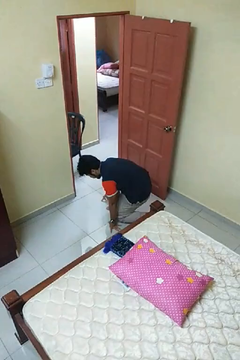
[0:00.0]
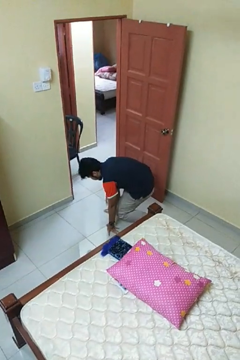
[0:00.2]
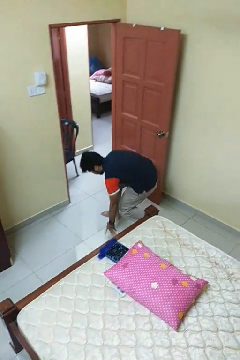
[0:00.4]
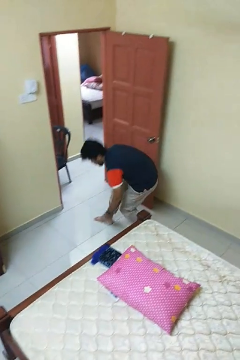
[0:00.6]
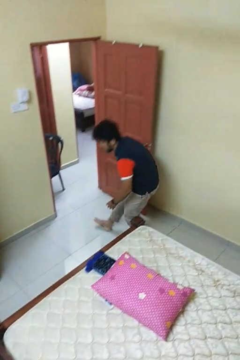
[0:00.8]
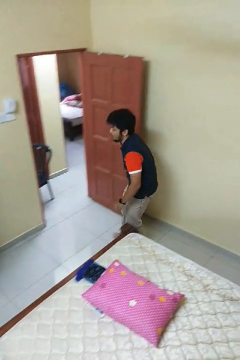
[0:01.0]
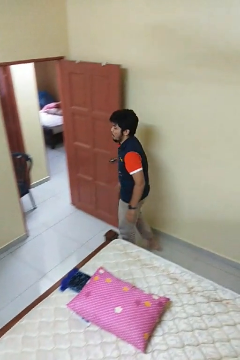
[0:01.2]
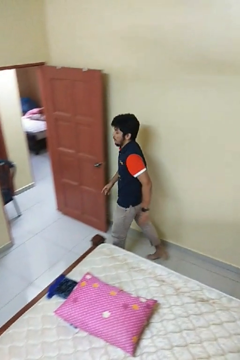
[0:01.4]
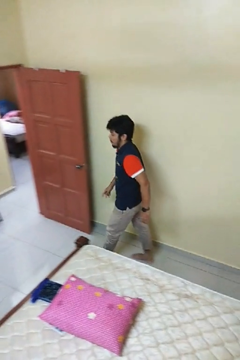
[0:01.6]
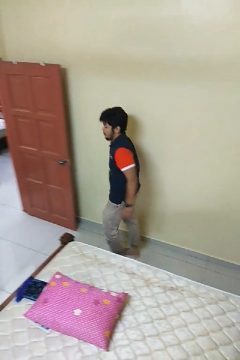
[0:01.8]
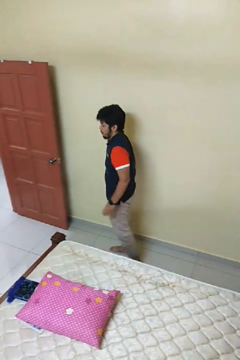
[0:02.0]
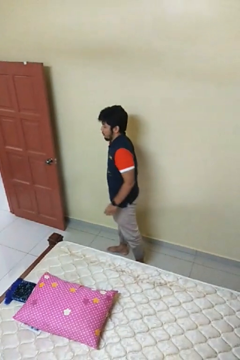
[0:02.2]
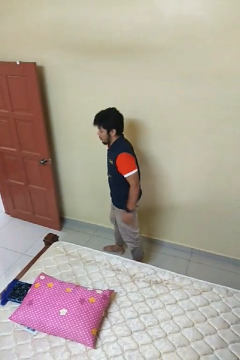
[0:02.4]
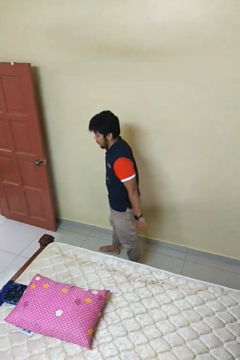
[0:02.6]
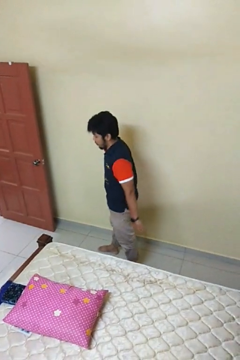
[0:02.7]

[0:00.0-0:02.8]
person stands up from floor

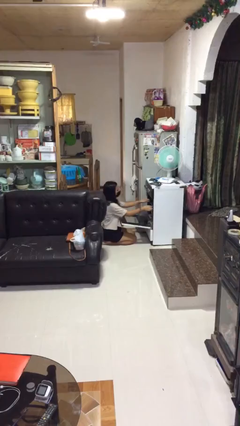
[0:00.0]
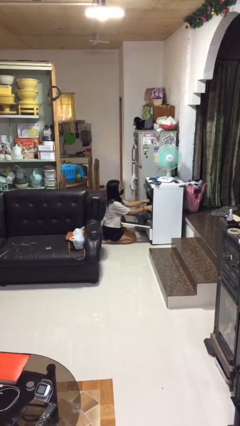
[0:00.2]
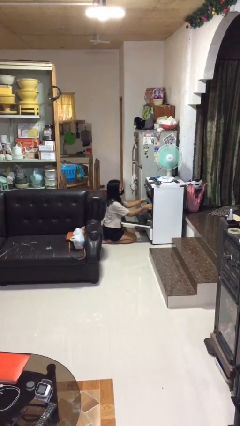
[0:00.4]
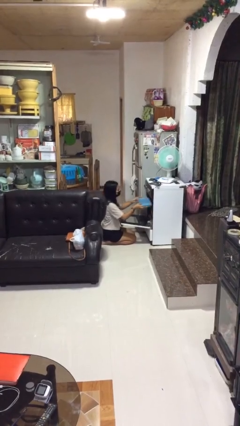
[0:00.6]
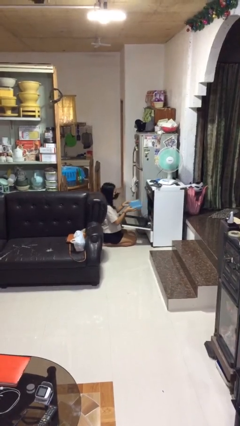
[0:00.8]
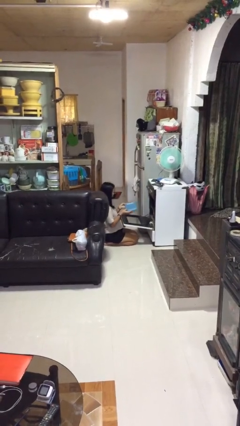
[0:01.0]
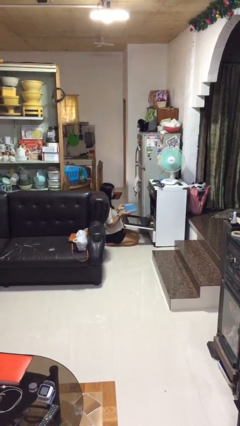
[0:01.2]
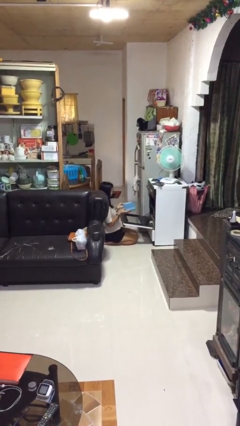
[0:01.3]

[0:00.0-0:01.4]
person takes object from oven

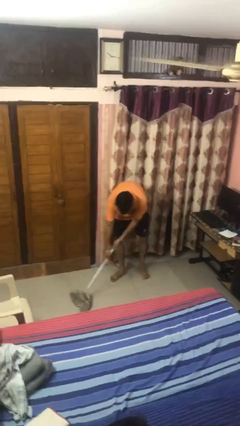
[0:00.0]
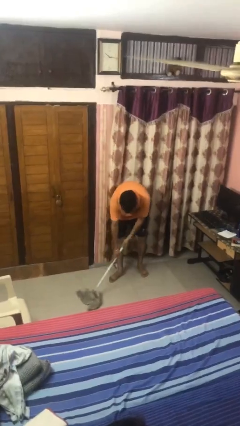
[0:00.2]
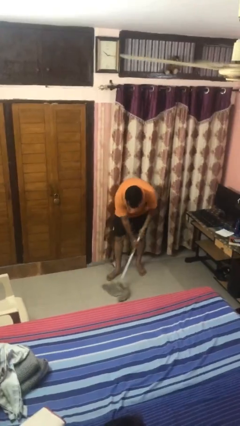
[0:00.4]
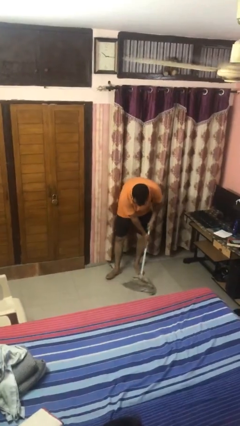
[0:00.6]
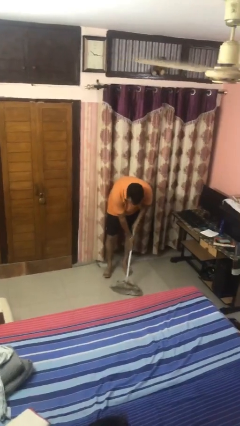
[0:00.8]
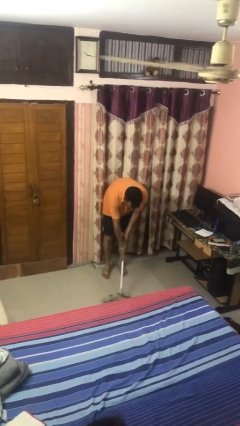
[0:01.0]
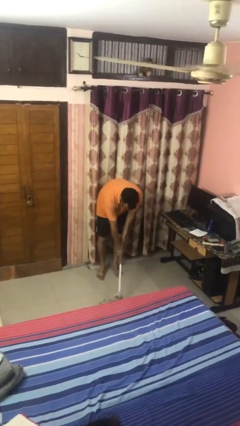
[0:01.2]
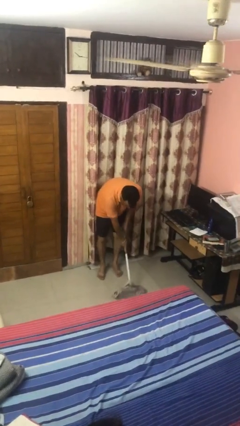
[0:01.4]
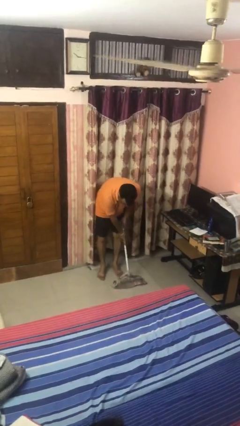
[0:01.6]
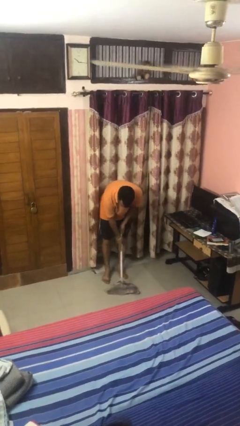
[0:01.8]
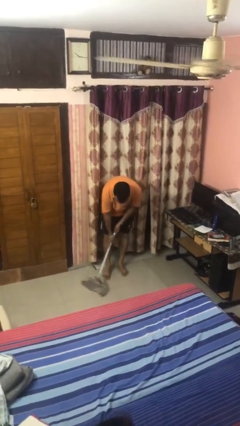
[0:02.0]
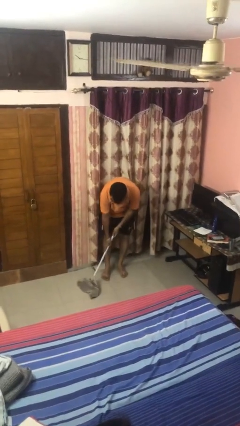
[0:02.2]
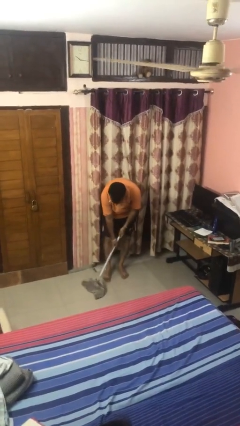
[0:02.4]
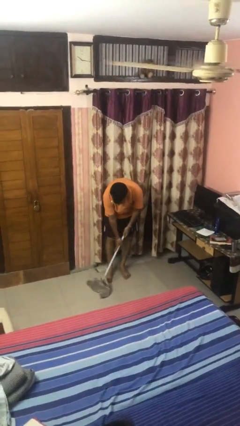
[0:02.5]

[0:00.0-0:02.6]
person mops

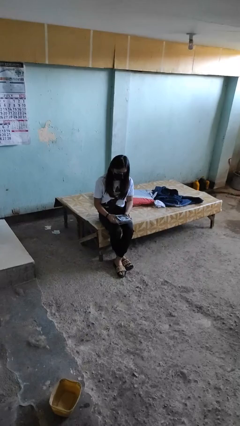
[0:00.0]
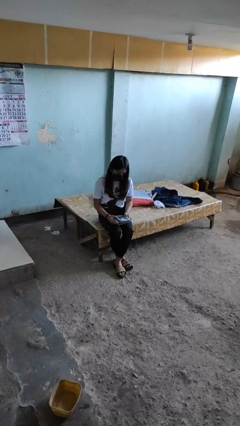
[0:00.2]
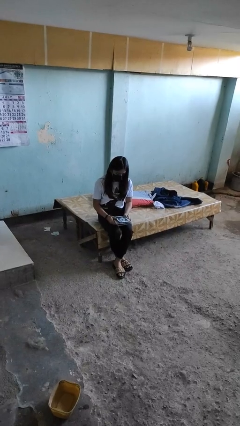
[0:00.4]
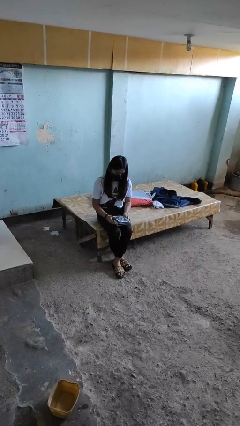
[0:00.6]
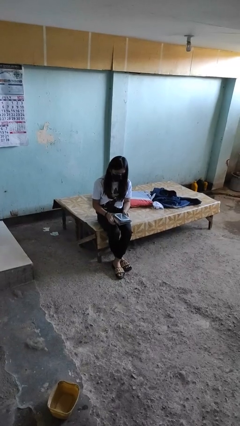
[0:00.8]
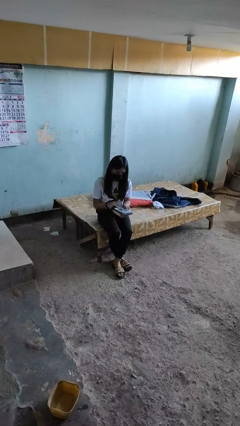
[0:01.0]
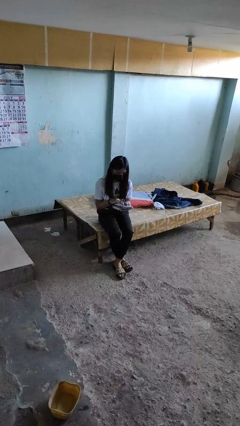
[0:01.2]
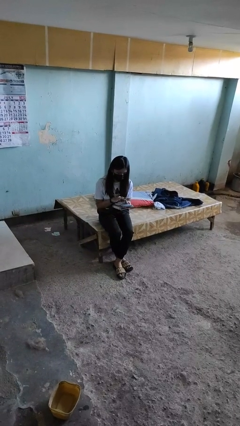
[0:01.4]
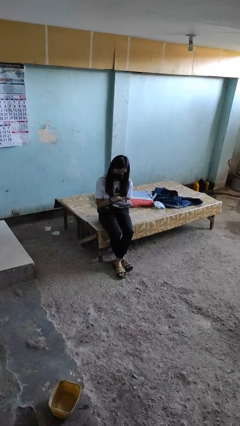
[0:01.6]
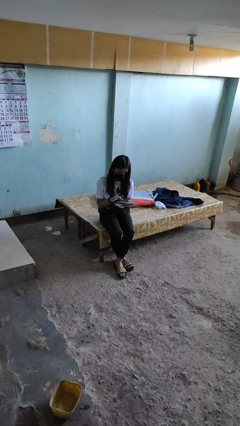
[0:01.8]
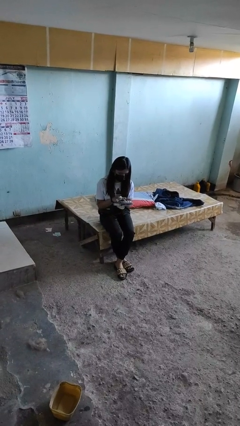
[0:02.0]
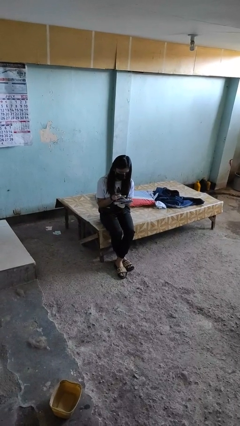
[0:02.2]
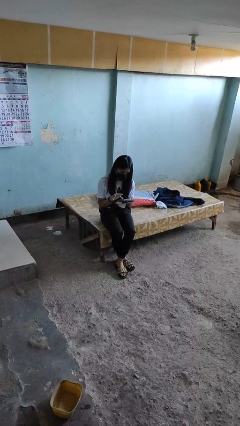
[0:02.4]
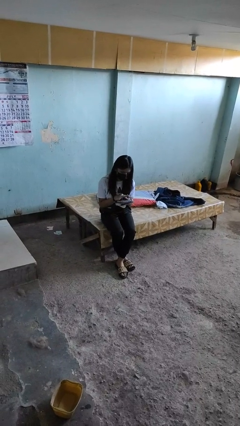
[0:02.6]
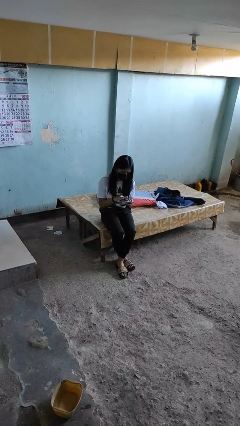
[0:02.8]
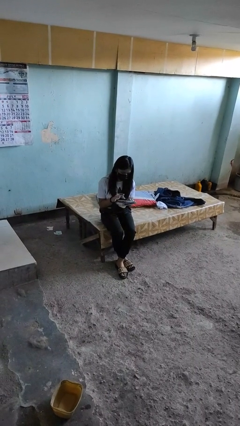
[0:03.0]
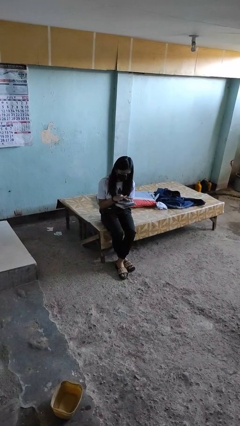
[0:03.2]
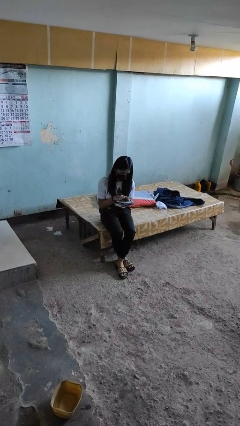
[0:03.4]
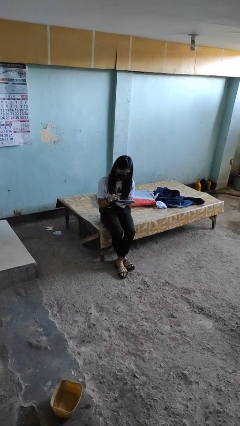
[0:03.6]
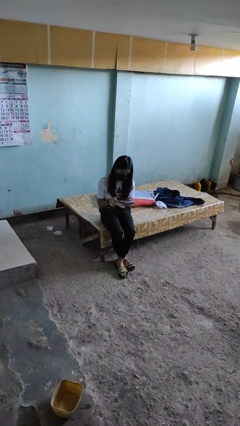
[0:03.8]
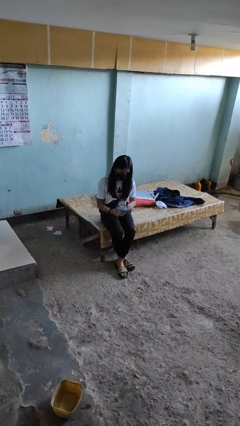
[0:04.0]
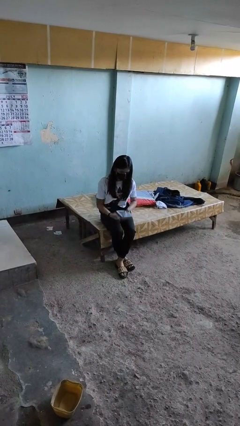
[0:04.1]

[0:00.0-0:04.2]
person interacts with tablet

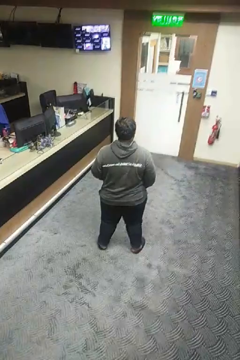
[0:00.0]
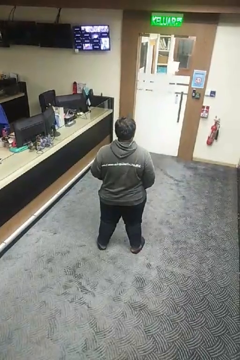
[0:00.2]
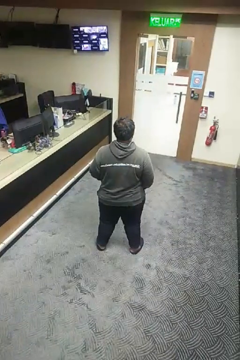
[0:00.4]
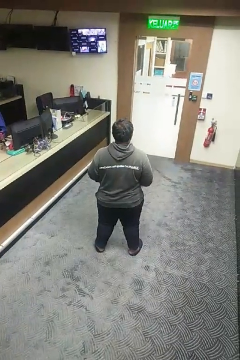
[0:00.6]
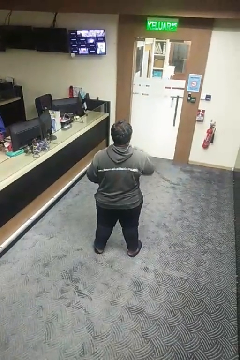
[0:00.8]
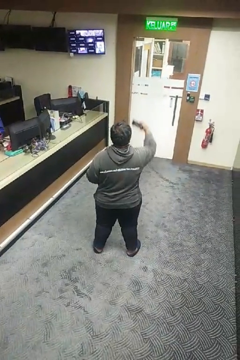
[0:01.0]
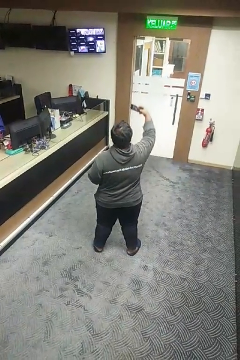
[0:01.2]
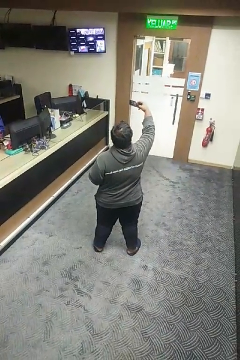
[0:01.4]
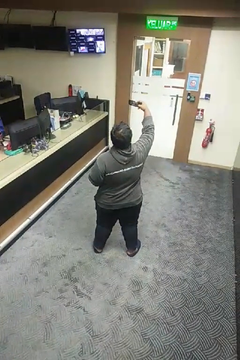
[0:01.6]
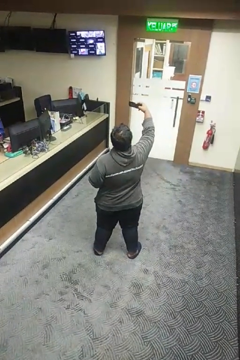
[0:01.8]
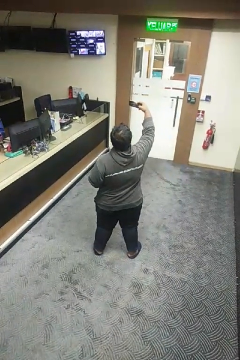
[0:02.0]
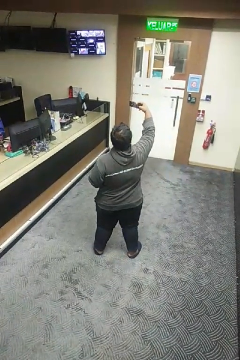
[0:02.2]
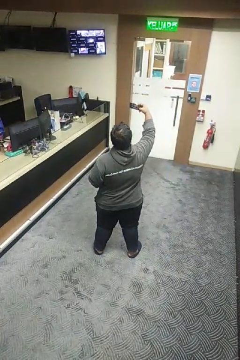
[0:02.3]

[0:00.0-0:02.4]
person takes selfie

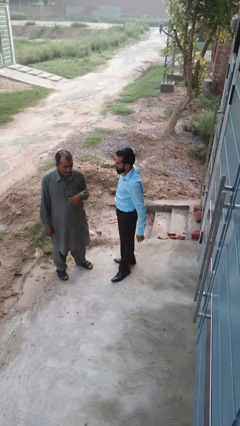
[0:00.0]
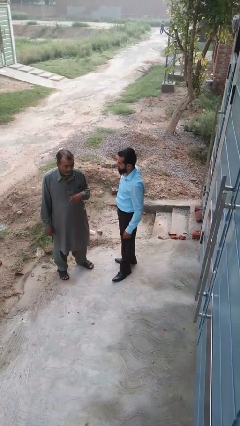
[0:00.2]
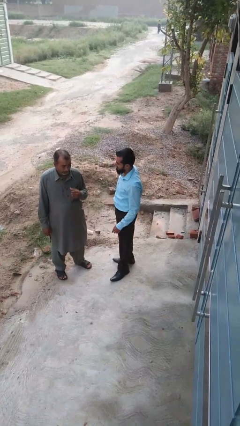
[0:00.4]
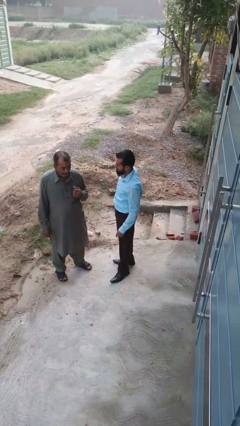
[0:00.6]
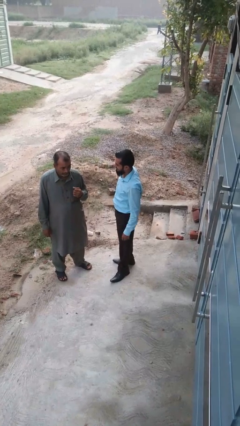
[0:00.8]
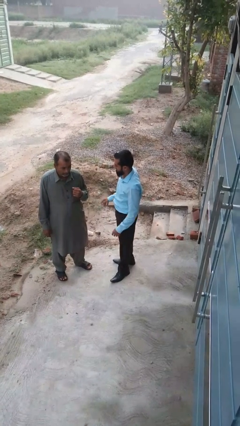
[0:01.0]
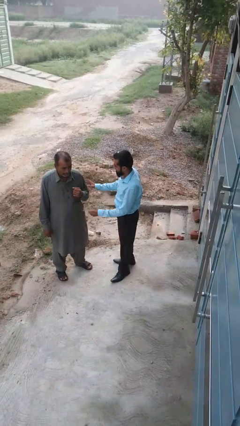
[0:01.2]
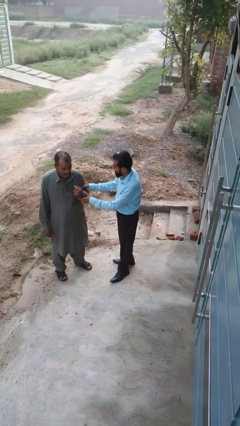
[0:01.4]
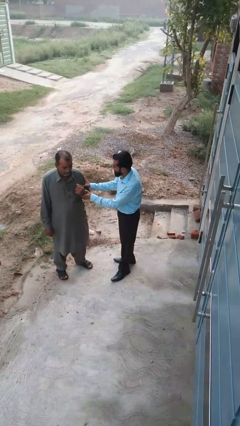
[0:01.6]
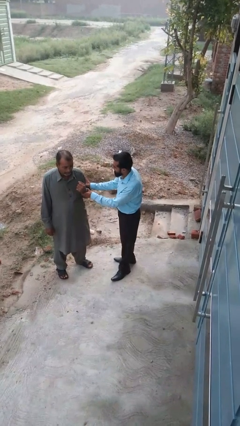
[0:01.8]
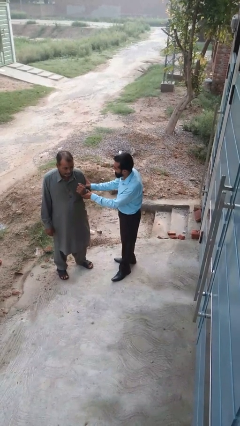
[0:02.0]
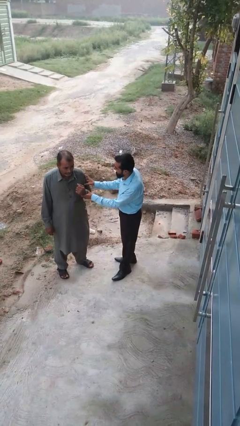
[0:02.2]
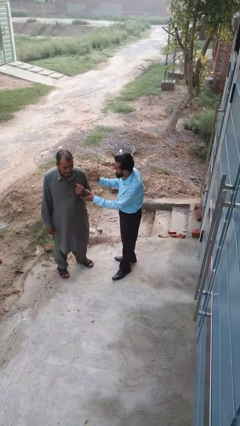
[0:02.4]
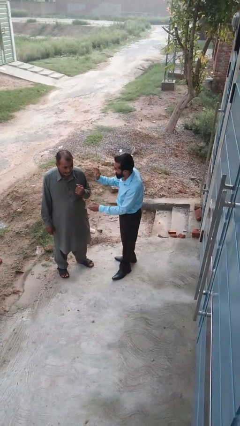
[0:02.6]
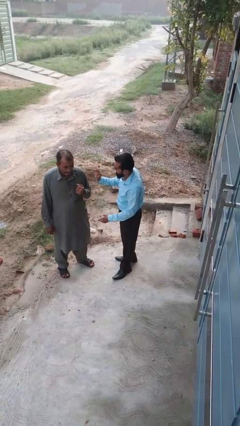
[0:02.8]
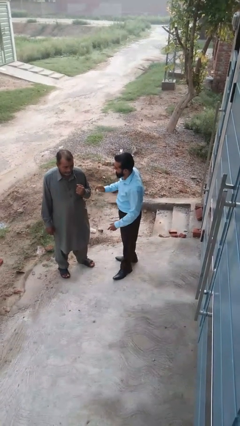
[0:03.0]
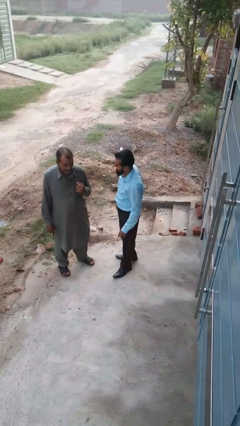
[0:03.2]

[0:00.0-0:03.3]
person grabs person by bicep

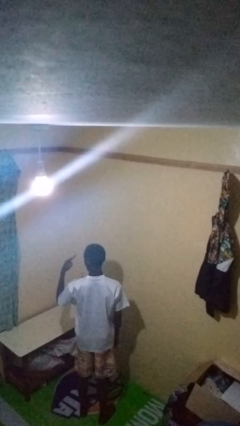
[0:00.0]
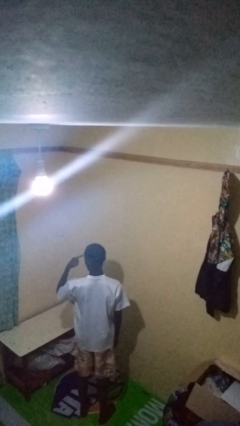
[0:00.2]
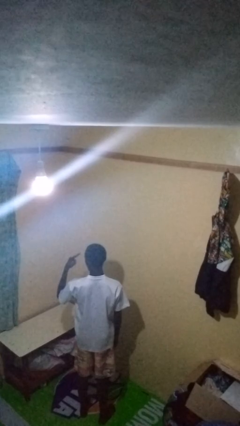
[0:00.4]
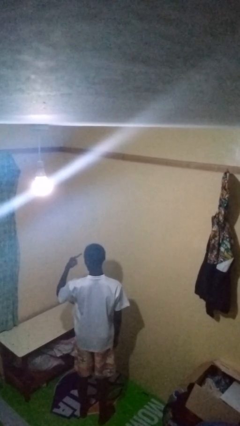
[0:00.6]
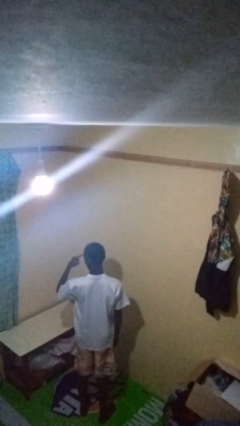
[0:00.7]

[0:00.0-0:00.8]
person gestures watch closely

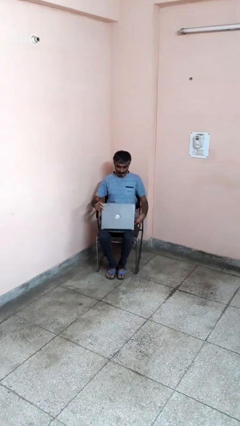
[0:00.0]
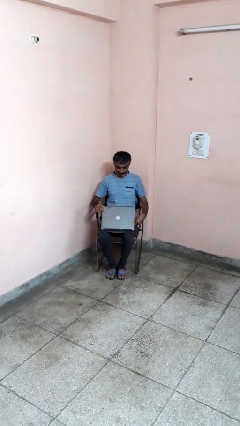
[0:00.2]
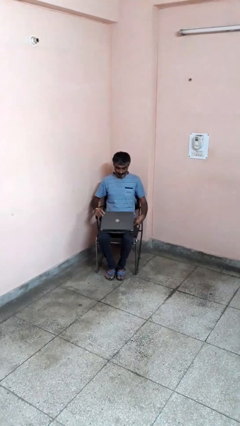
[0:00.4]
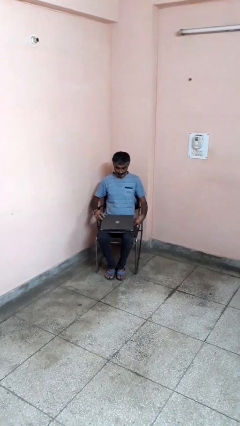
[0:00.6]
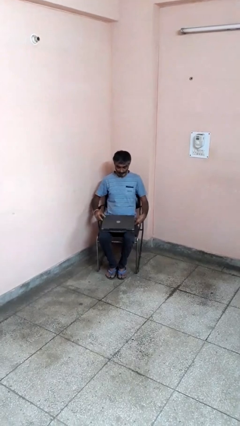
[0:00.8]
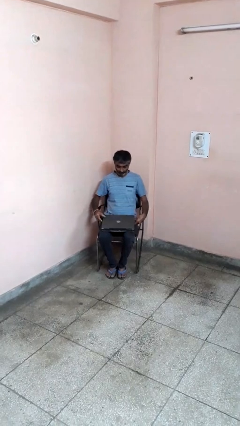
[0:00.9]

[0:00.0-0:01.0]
person closes laptop
